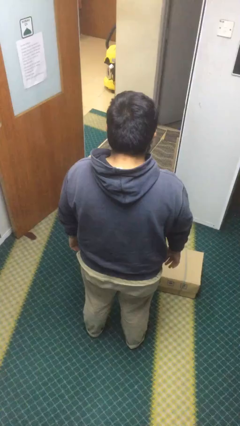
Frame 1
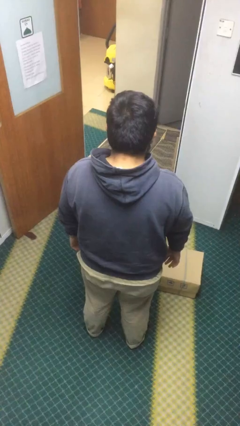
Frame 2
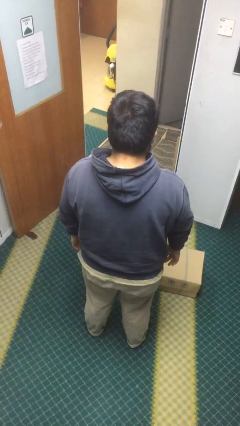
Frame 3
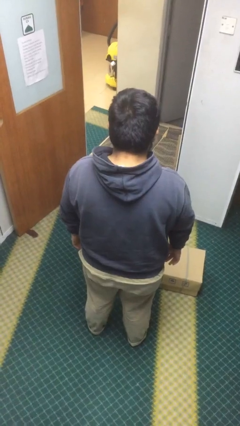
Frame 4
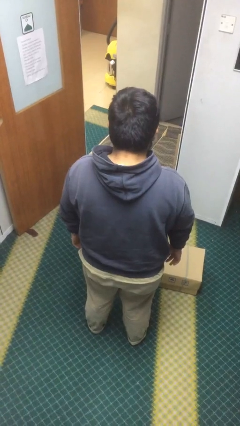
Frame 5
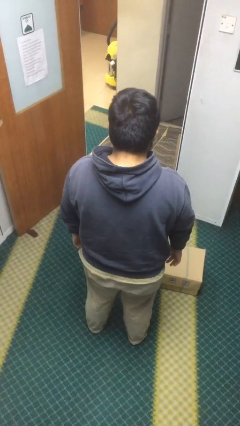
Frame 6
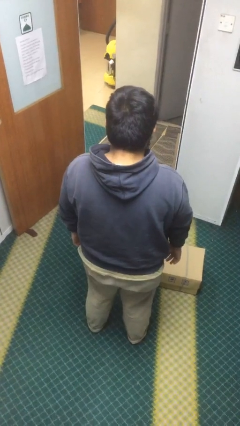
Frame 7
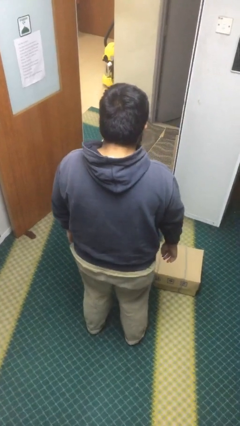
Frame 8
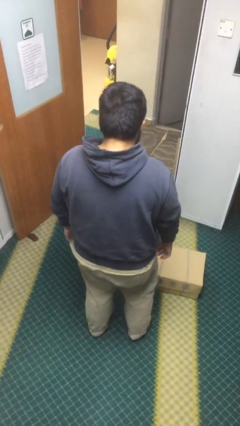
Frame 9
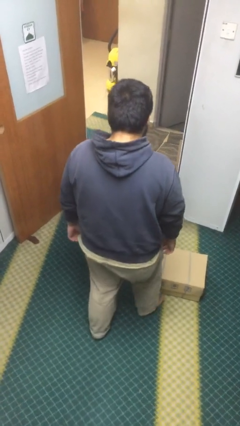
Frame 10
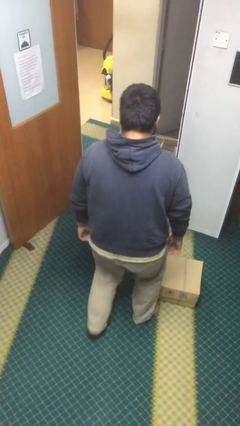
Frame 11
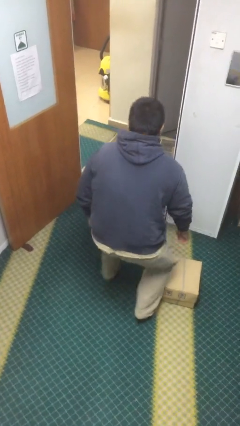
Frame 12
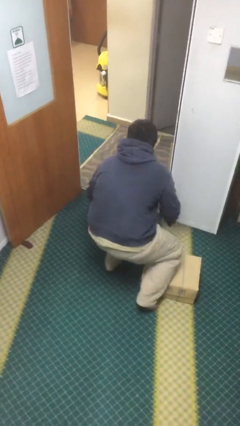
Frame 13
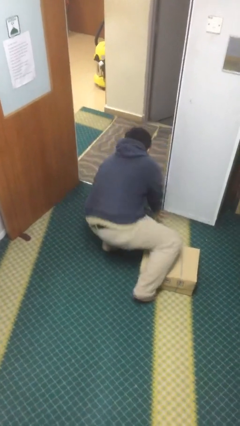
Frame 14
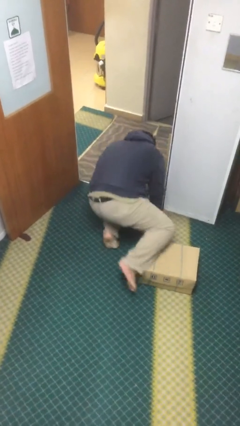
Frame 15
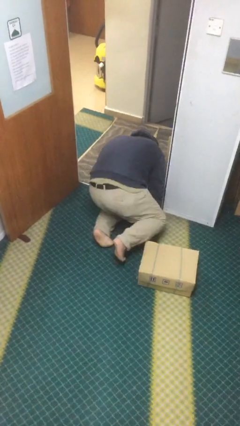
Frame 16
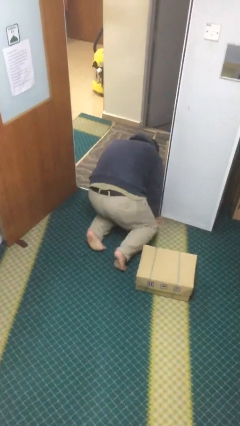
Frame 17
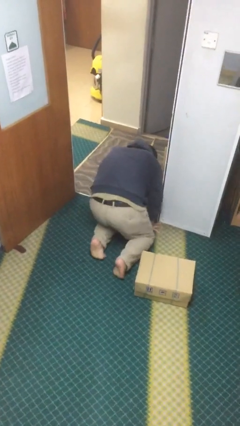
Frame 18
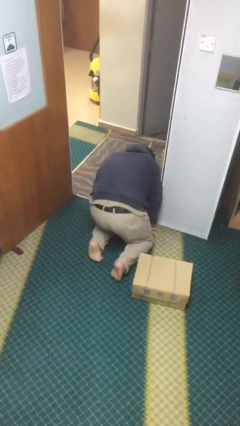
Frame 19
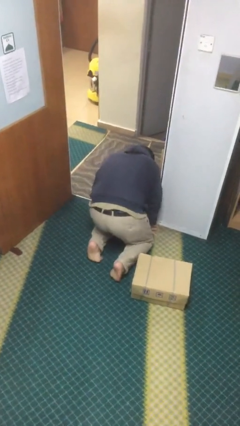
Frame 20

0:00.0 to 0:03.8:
person trips on object on floor

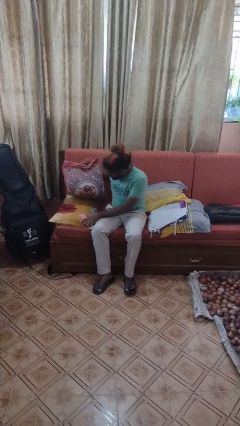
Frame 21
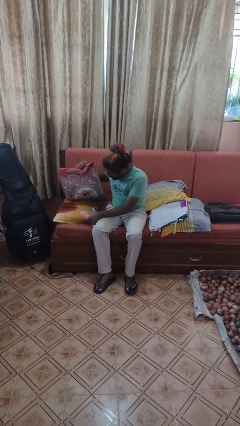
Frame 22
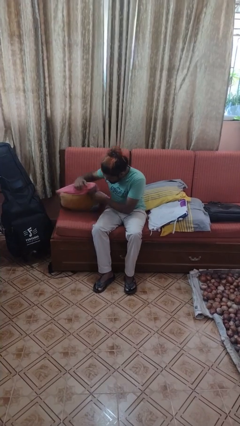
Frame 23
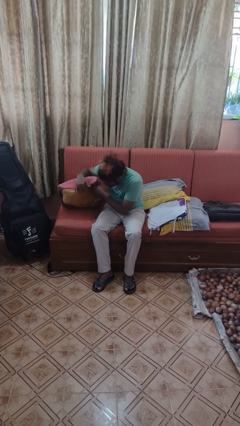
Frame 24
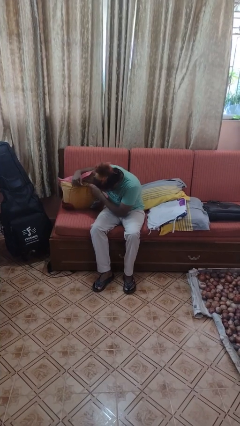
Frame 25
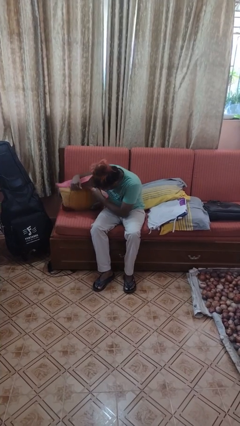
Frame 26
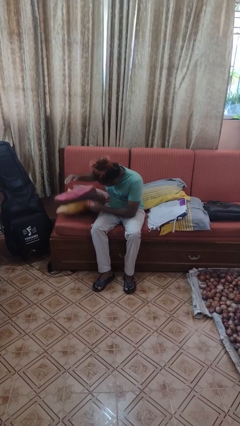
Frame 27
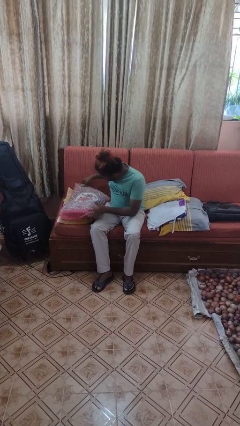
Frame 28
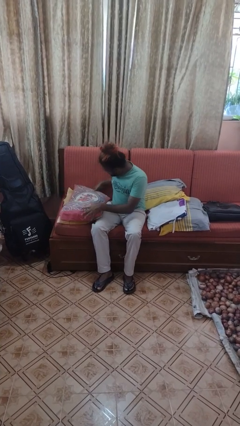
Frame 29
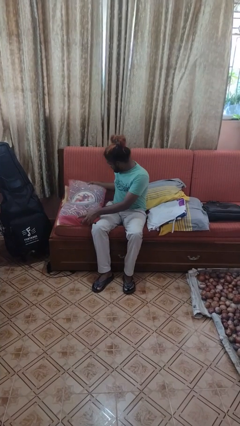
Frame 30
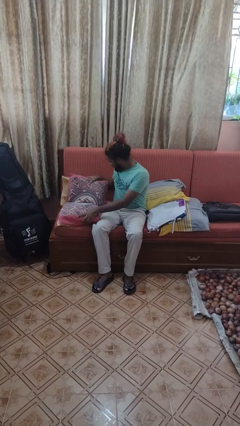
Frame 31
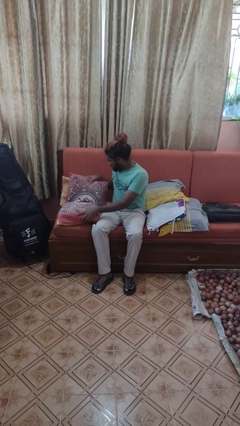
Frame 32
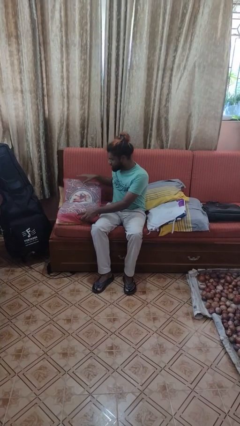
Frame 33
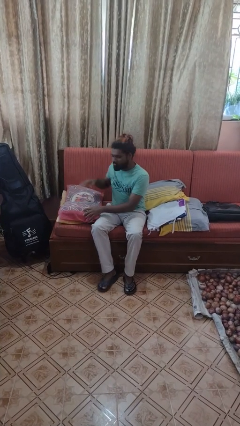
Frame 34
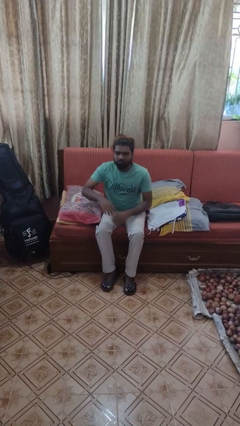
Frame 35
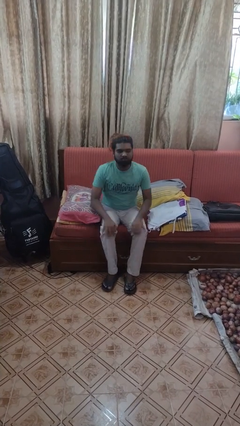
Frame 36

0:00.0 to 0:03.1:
person searches in couch

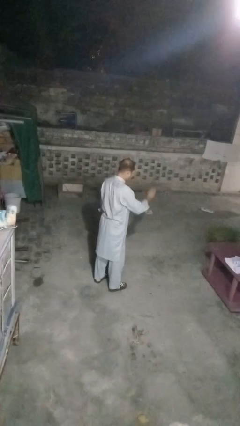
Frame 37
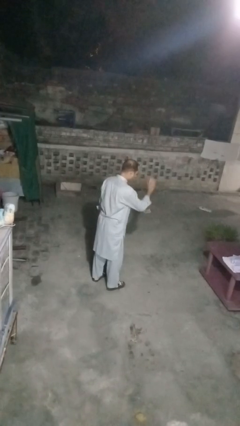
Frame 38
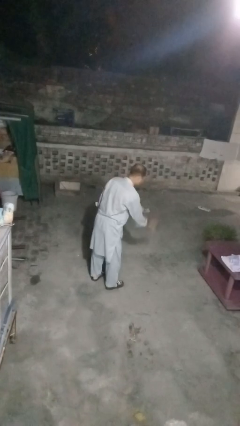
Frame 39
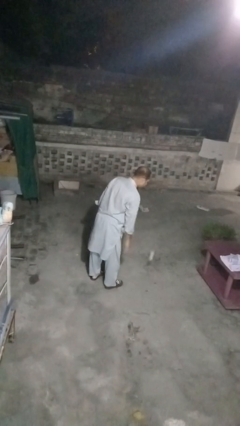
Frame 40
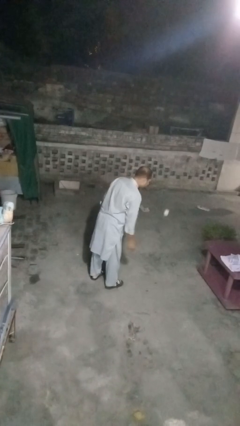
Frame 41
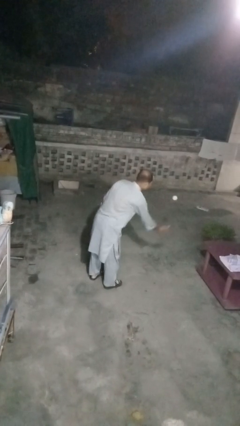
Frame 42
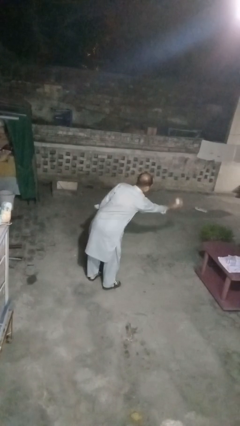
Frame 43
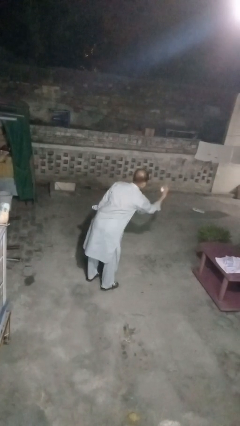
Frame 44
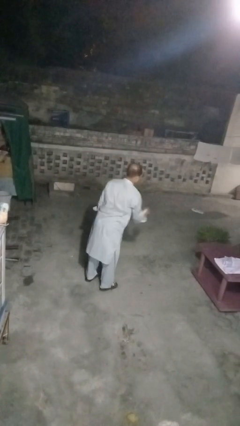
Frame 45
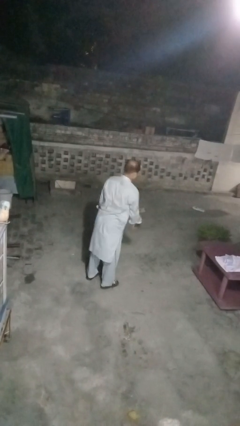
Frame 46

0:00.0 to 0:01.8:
person bounces ball on floor

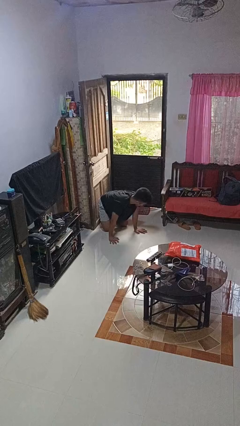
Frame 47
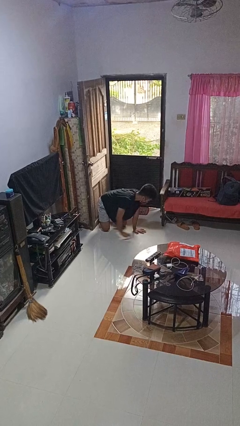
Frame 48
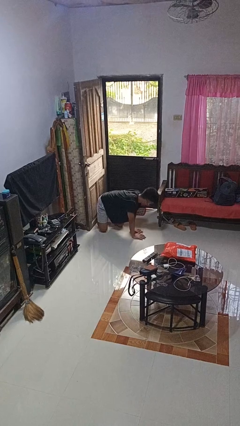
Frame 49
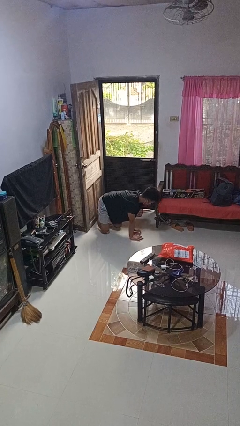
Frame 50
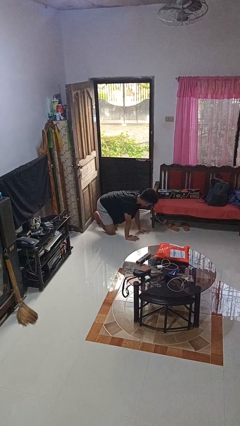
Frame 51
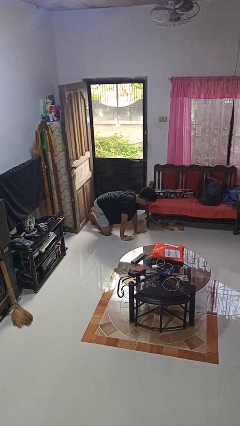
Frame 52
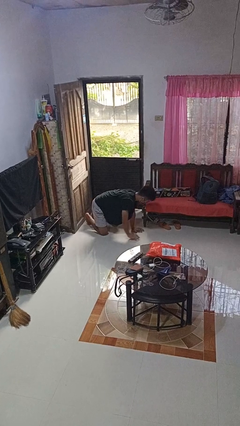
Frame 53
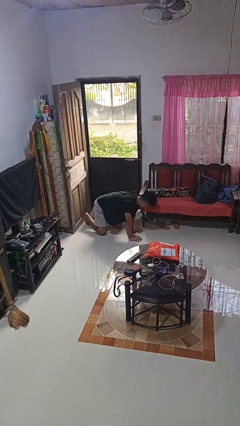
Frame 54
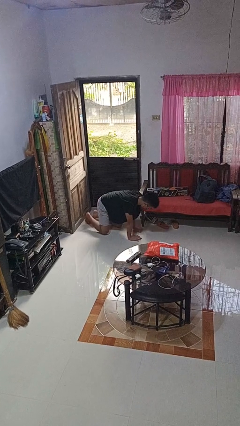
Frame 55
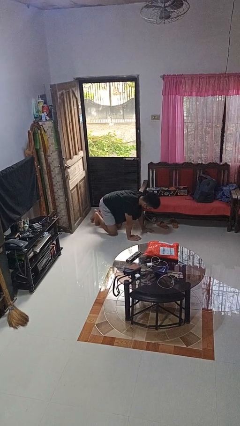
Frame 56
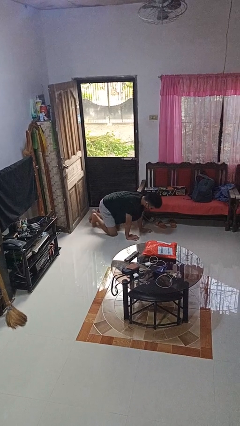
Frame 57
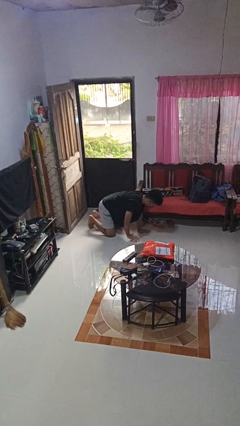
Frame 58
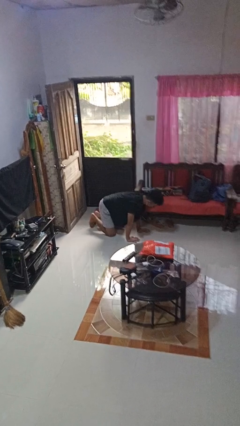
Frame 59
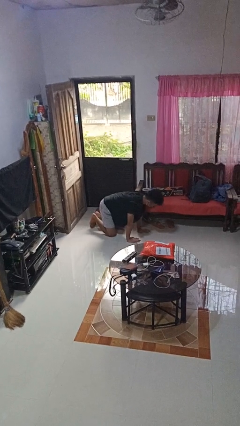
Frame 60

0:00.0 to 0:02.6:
person crawls

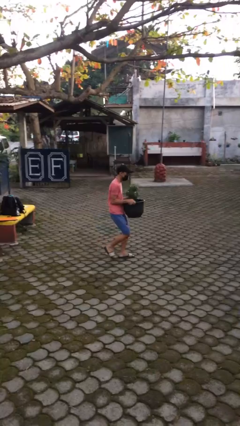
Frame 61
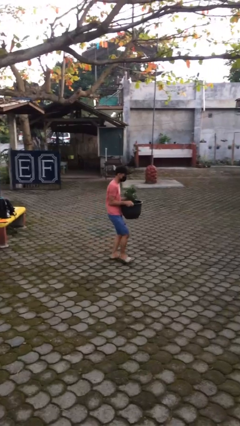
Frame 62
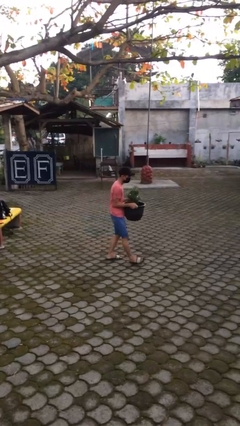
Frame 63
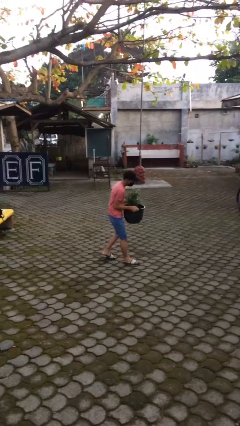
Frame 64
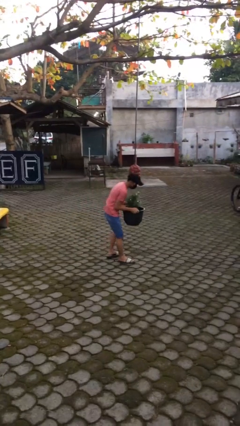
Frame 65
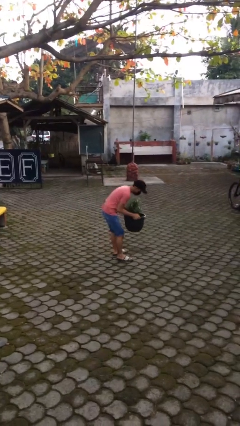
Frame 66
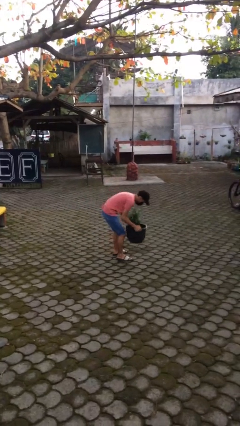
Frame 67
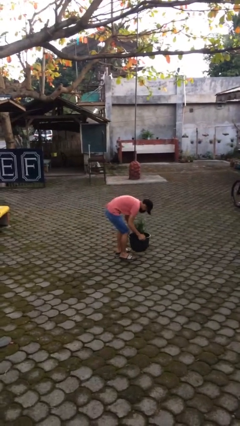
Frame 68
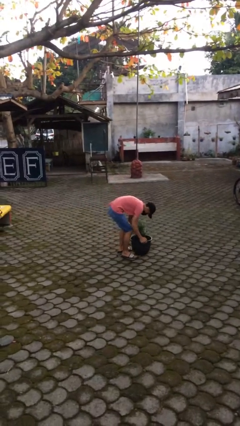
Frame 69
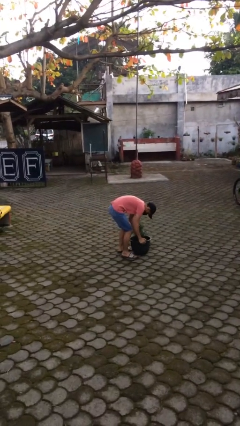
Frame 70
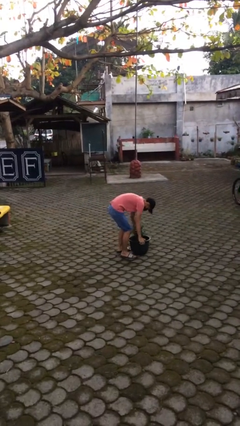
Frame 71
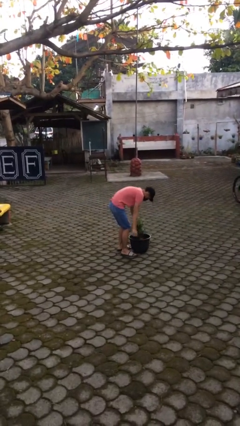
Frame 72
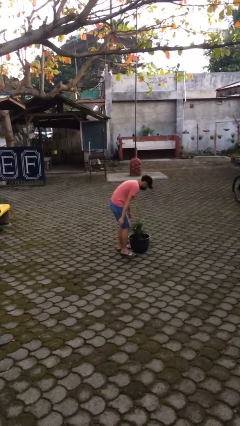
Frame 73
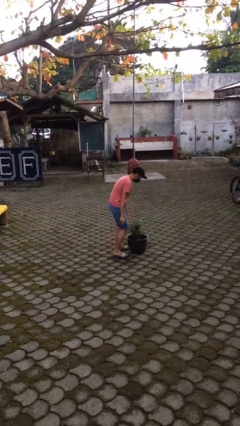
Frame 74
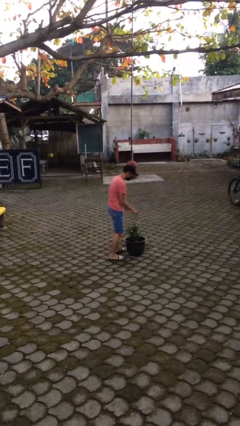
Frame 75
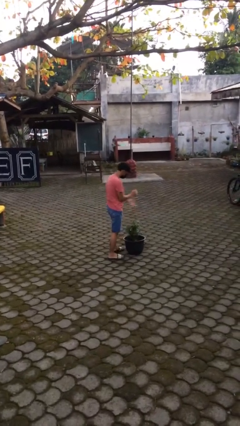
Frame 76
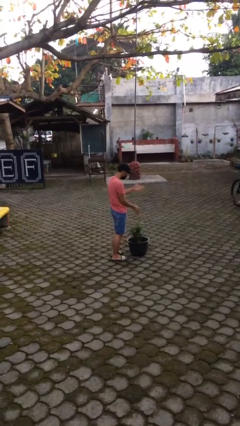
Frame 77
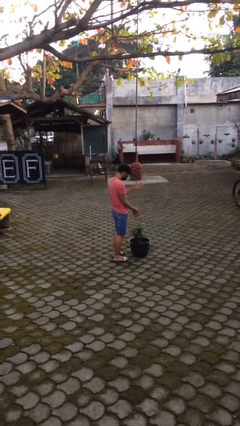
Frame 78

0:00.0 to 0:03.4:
person puts down object on floor

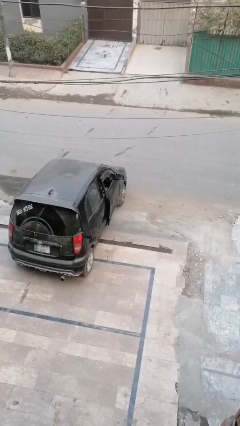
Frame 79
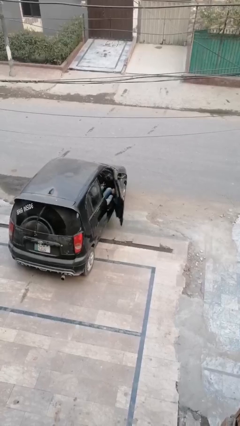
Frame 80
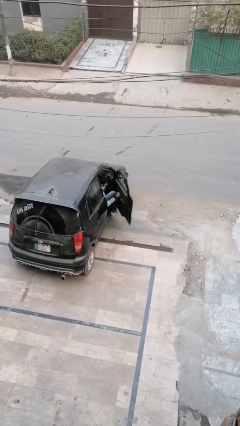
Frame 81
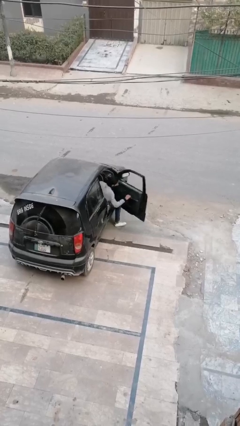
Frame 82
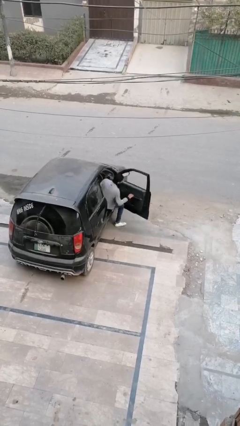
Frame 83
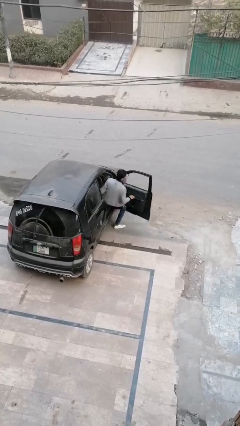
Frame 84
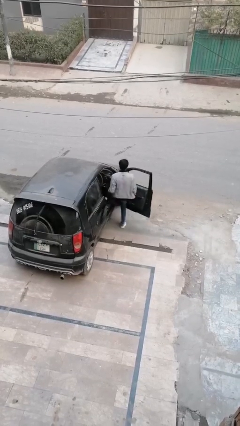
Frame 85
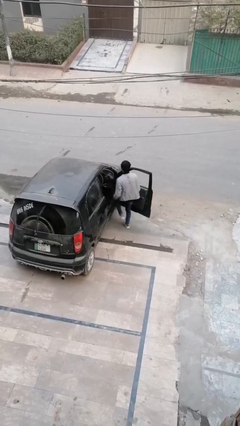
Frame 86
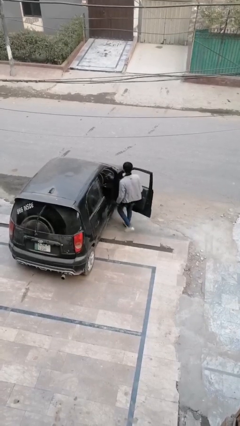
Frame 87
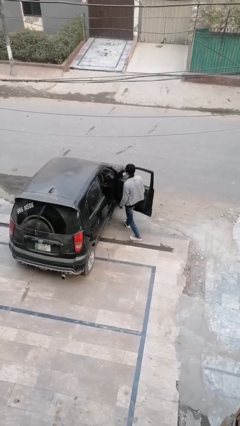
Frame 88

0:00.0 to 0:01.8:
person exits car

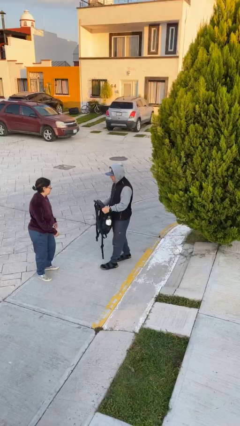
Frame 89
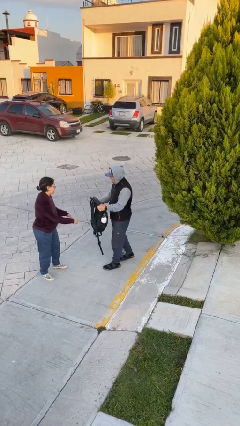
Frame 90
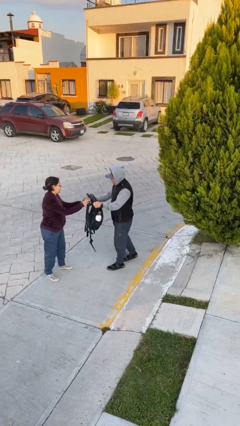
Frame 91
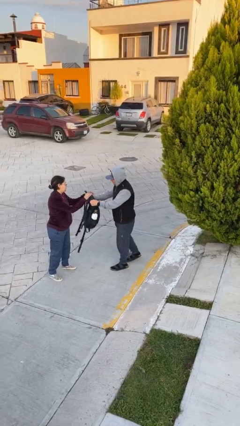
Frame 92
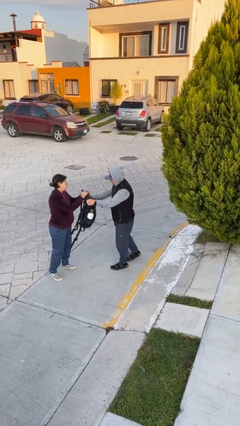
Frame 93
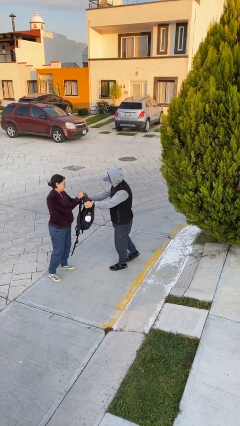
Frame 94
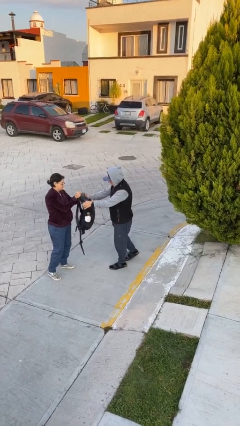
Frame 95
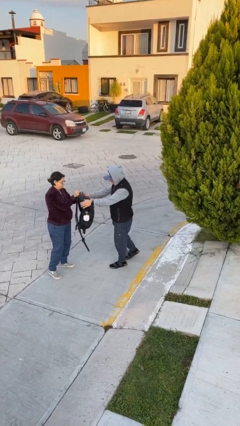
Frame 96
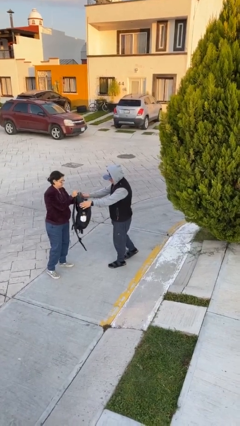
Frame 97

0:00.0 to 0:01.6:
person transfers object to person
